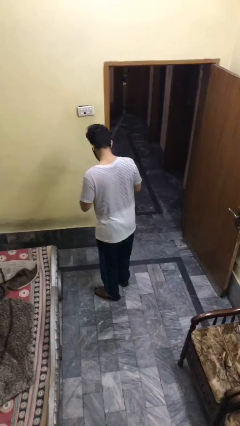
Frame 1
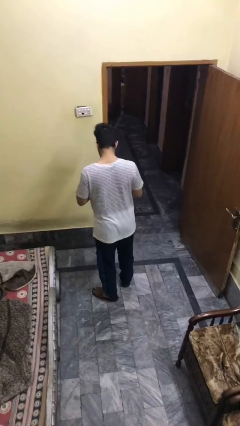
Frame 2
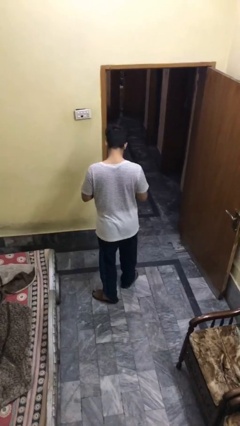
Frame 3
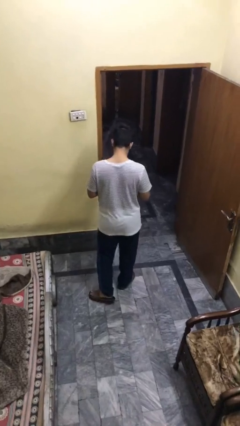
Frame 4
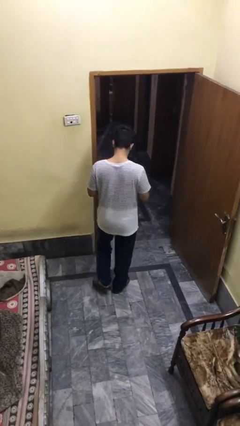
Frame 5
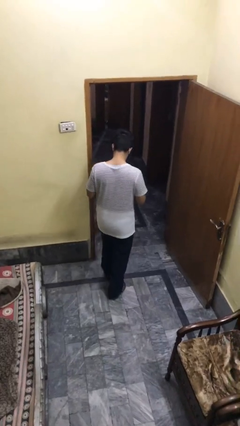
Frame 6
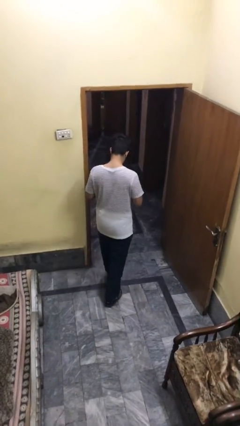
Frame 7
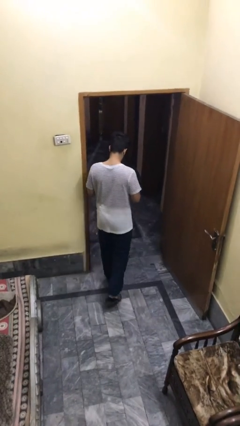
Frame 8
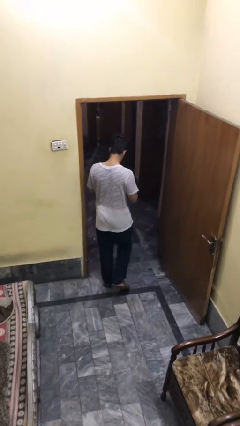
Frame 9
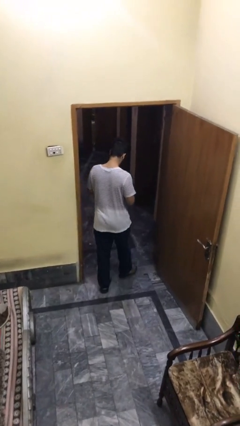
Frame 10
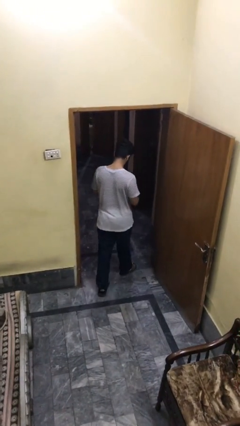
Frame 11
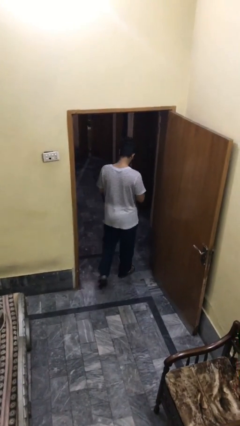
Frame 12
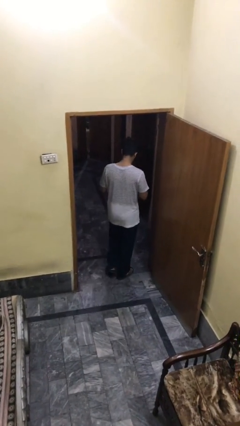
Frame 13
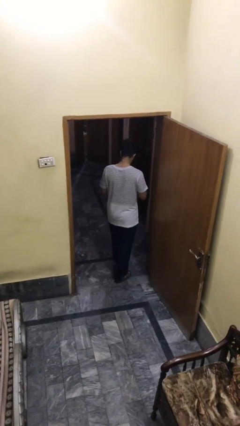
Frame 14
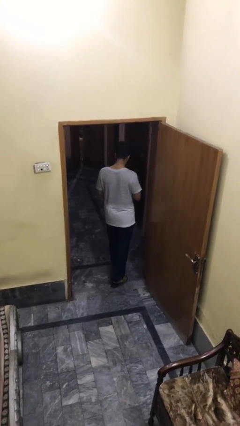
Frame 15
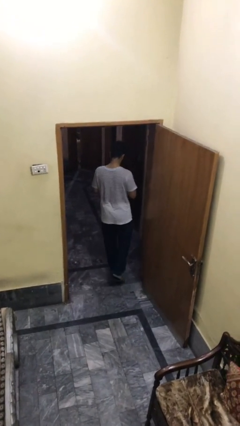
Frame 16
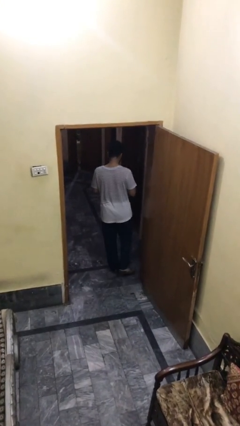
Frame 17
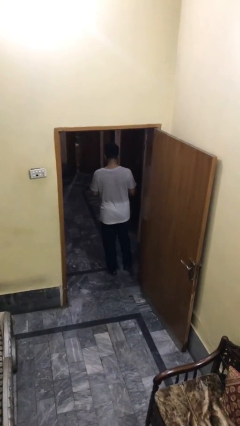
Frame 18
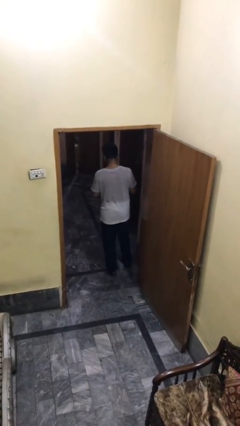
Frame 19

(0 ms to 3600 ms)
person exits scene through structure

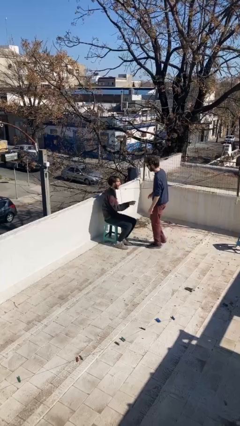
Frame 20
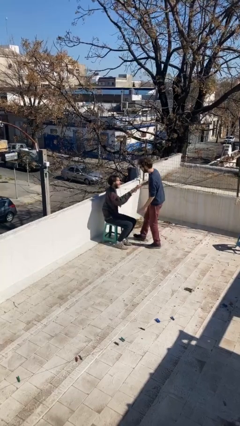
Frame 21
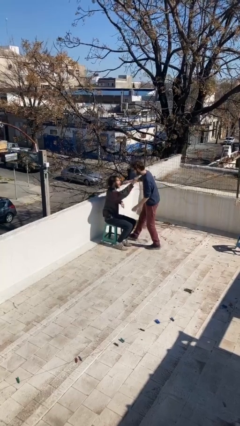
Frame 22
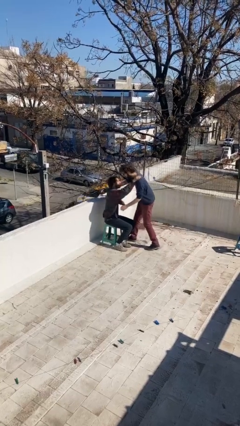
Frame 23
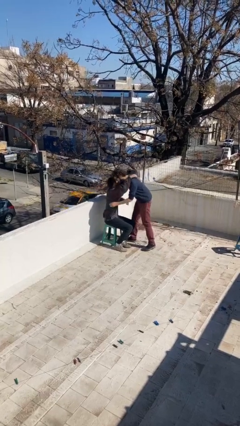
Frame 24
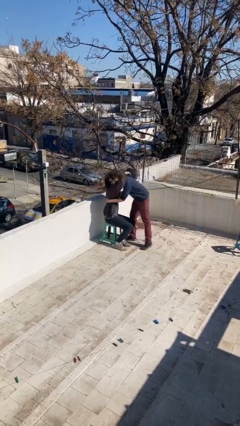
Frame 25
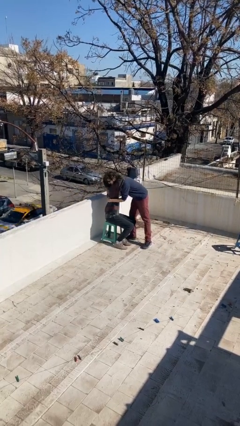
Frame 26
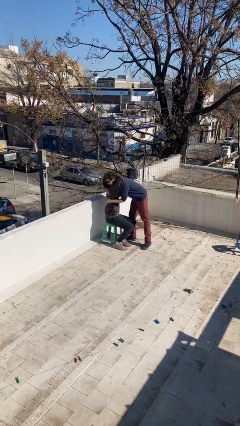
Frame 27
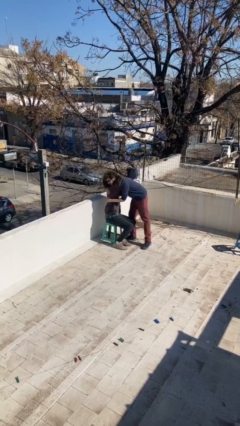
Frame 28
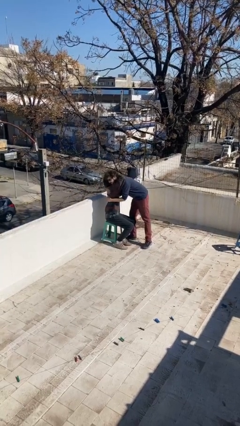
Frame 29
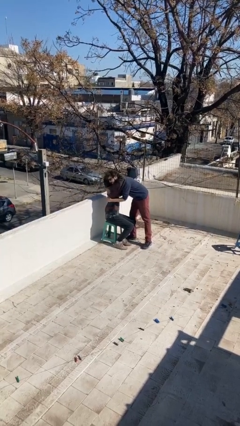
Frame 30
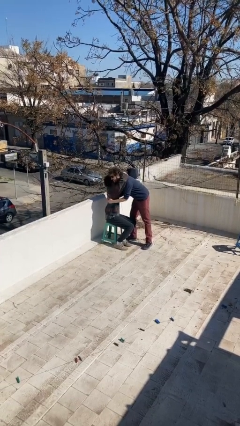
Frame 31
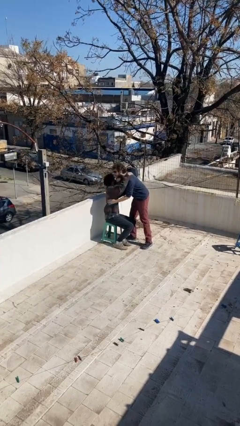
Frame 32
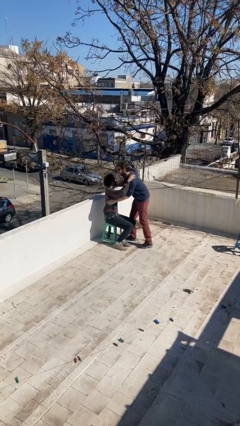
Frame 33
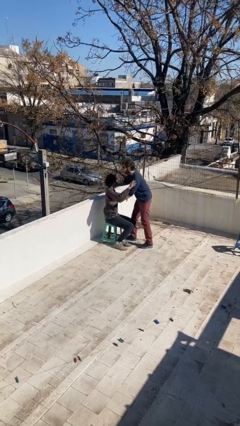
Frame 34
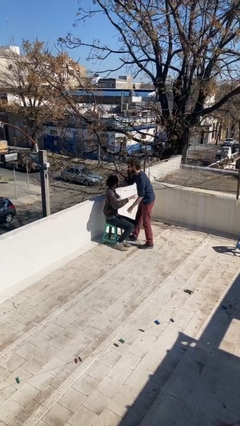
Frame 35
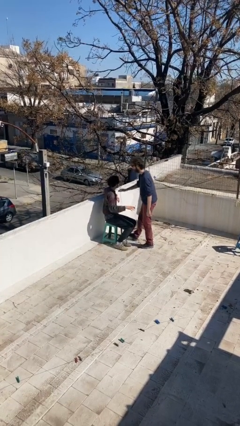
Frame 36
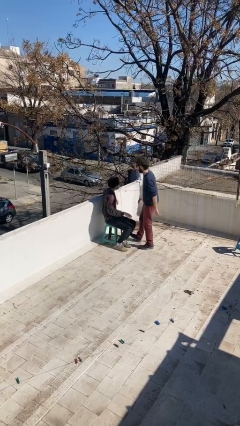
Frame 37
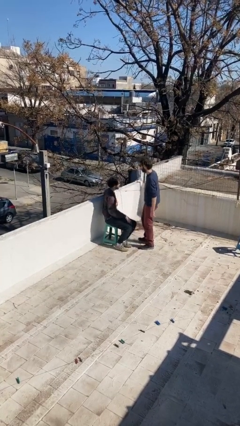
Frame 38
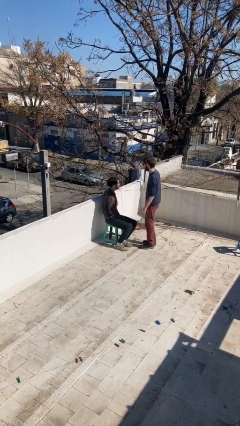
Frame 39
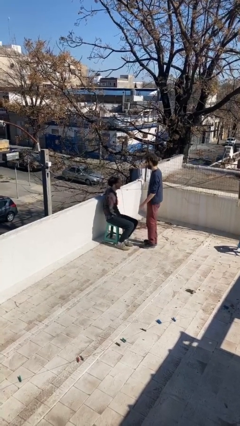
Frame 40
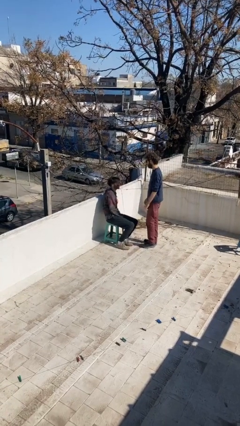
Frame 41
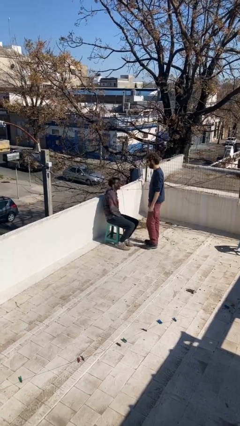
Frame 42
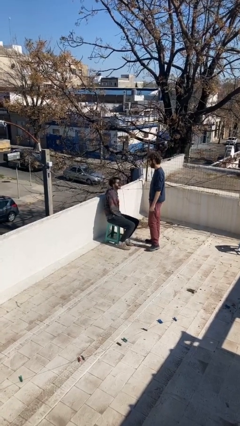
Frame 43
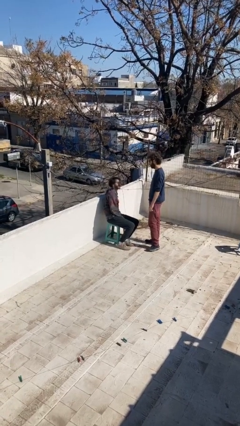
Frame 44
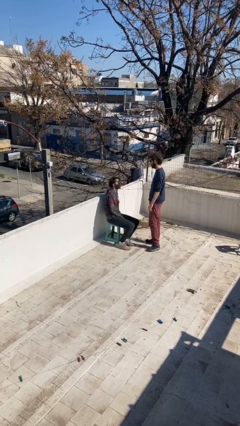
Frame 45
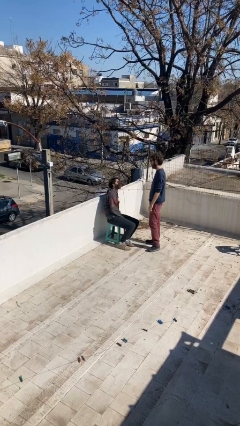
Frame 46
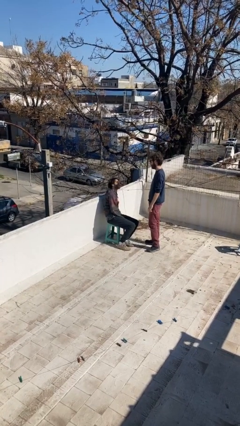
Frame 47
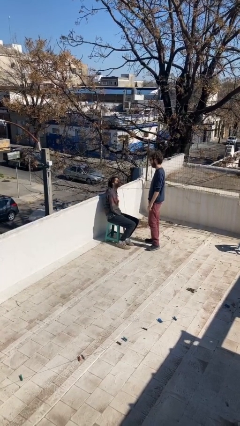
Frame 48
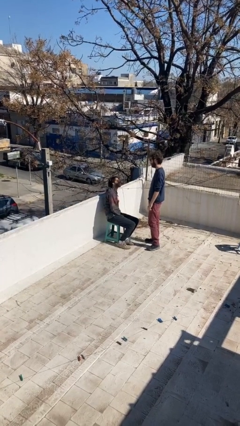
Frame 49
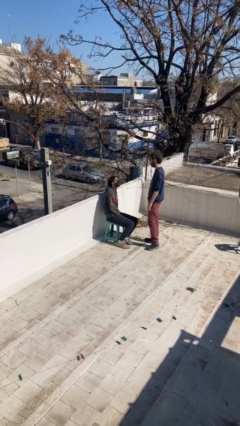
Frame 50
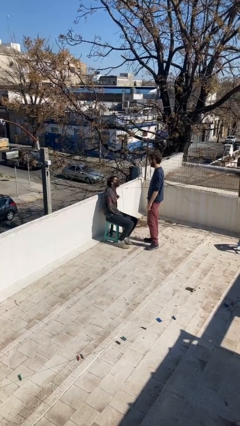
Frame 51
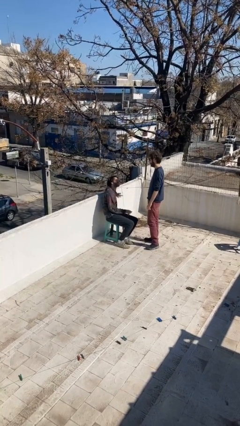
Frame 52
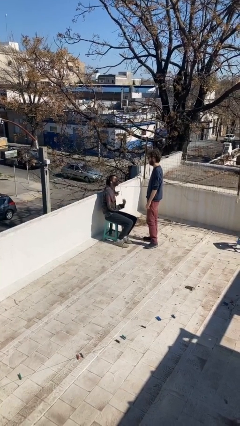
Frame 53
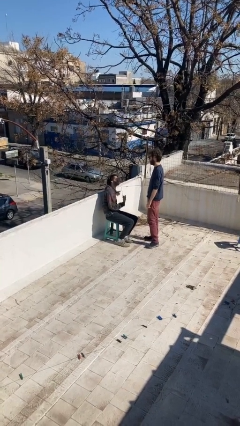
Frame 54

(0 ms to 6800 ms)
person embraces person

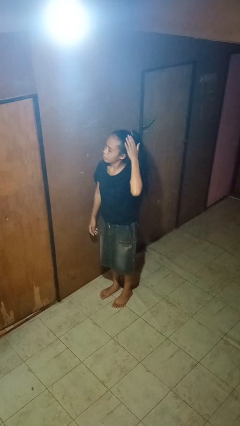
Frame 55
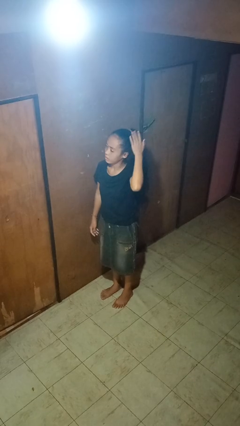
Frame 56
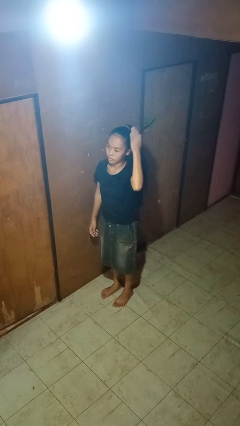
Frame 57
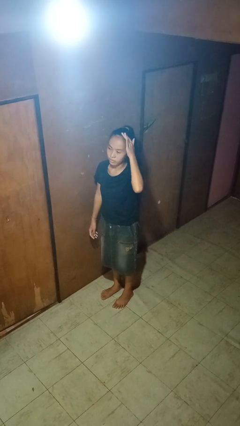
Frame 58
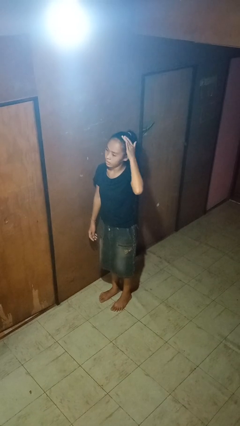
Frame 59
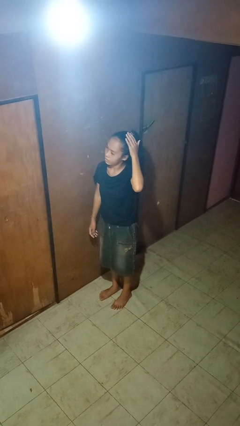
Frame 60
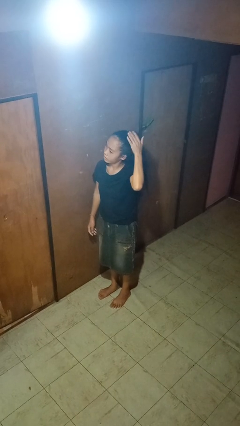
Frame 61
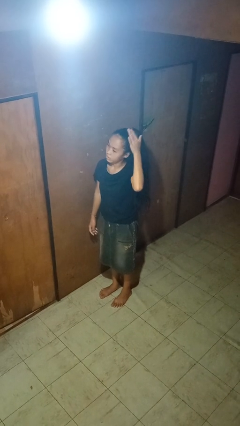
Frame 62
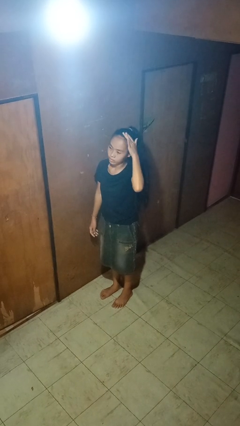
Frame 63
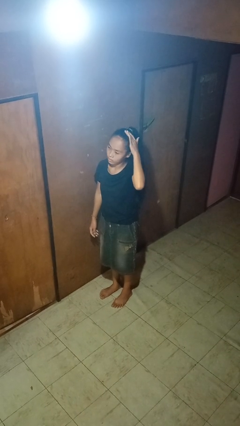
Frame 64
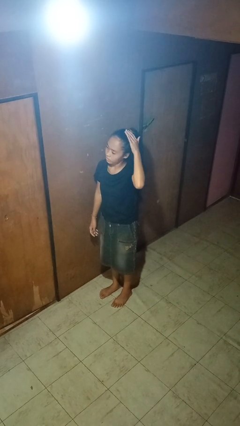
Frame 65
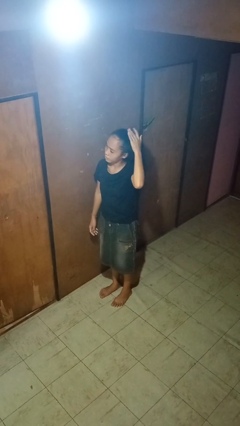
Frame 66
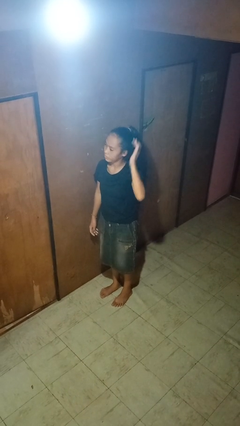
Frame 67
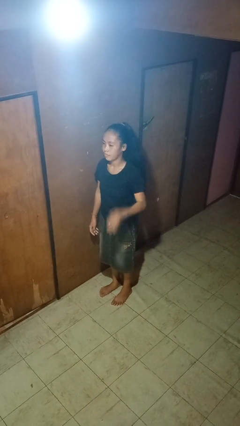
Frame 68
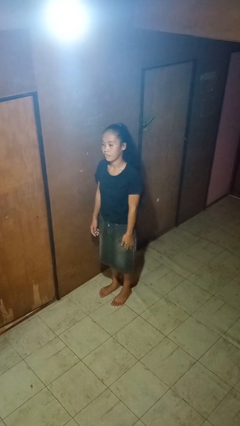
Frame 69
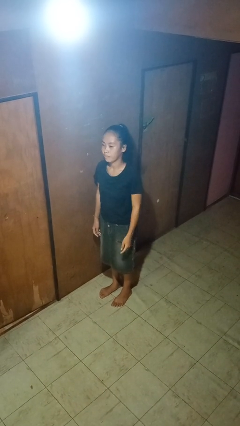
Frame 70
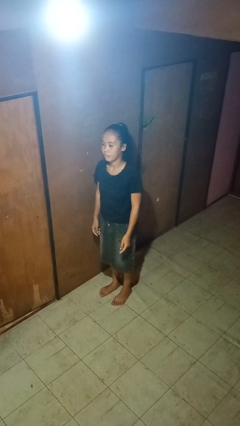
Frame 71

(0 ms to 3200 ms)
person strokes hair

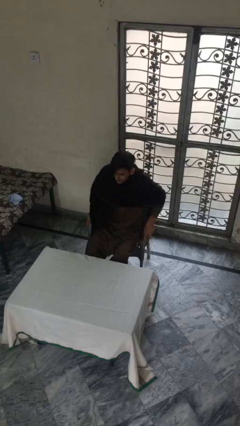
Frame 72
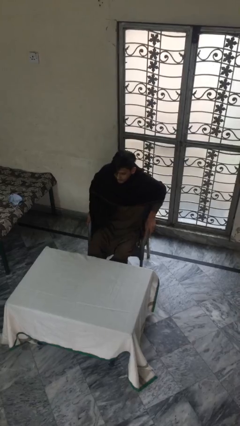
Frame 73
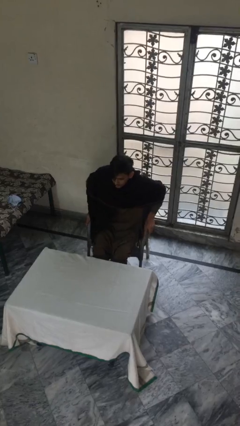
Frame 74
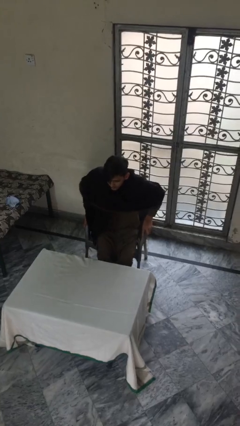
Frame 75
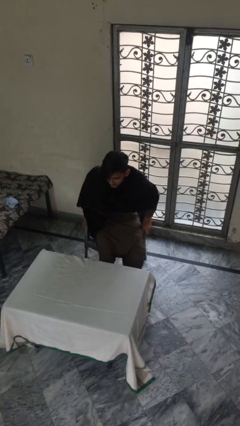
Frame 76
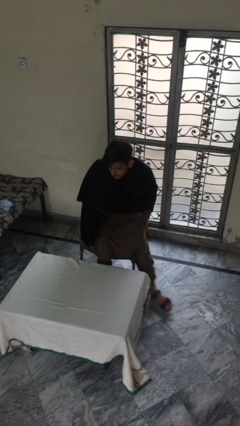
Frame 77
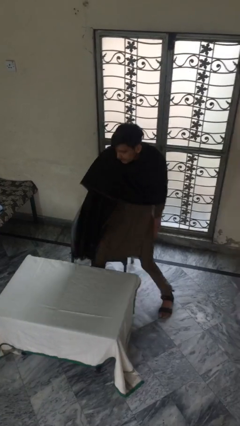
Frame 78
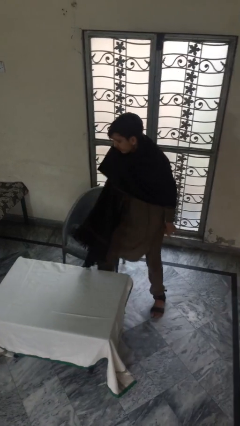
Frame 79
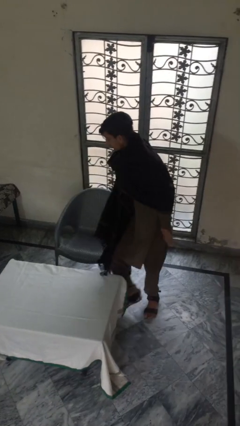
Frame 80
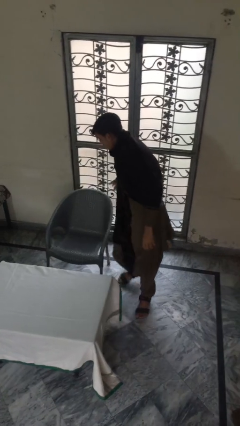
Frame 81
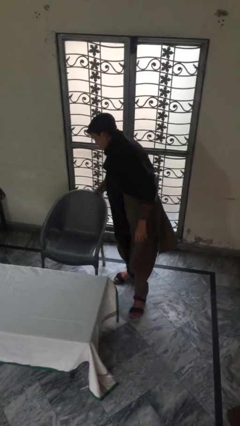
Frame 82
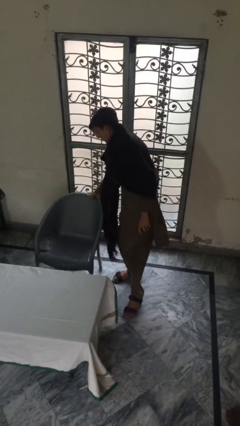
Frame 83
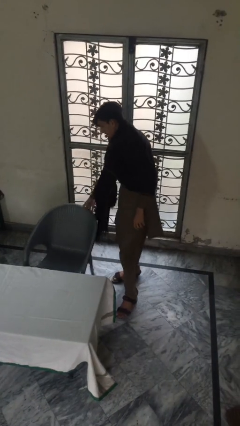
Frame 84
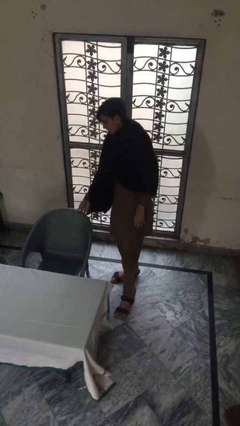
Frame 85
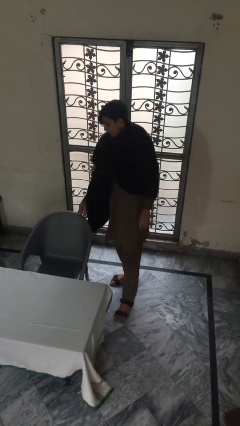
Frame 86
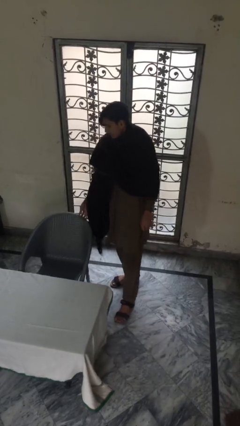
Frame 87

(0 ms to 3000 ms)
person stands up

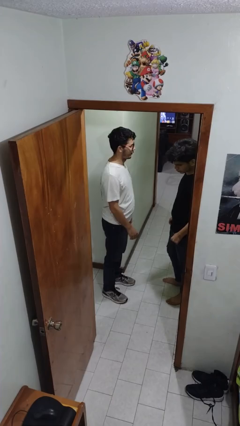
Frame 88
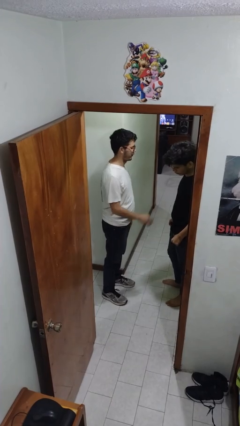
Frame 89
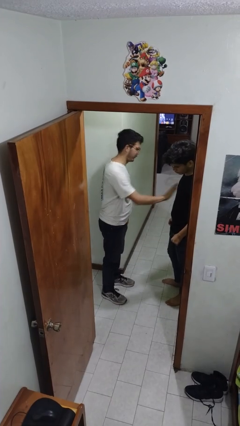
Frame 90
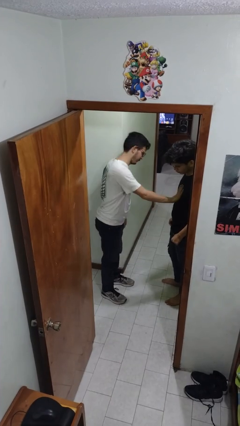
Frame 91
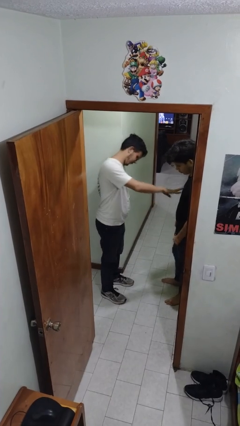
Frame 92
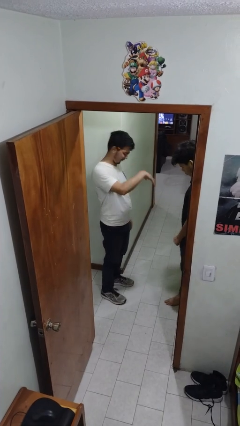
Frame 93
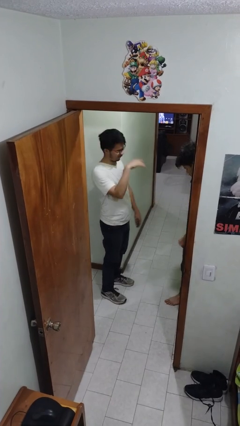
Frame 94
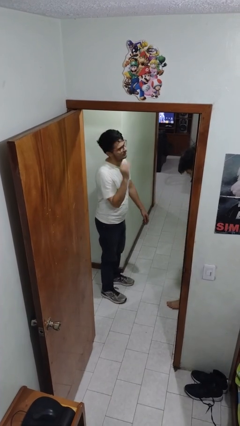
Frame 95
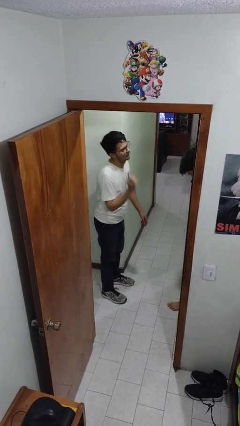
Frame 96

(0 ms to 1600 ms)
person shoves person
